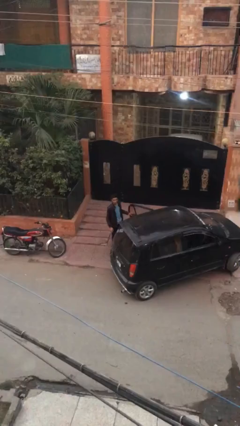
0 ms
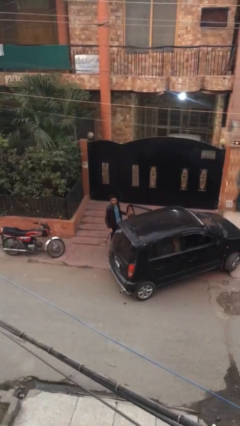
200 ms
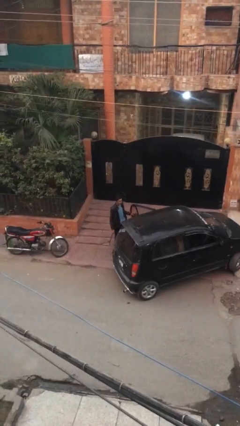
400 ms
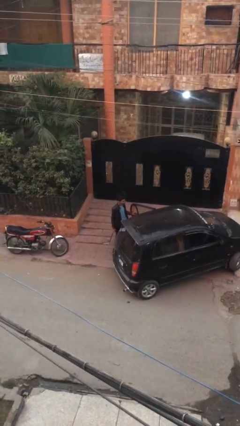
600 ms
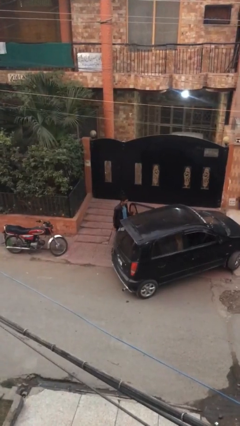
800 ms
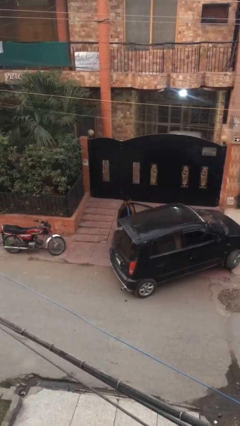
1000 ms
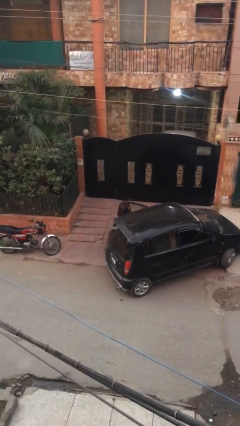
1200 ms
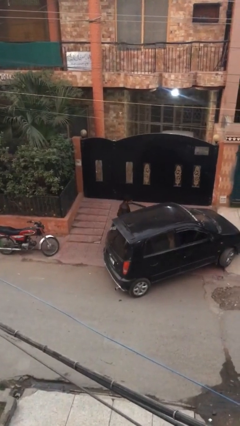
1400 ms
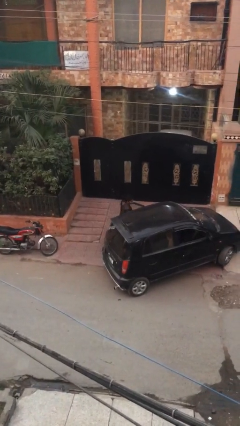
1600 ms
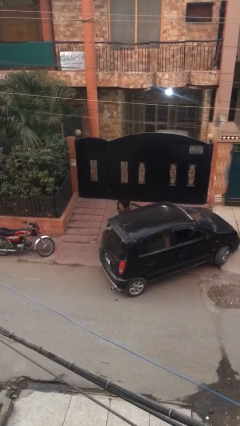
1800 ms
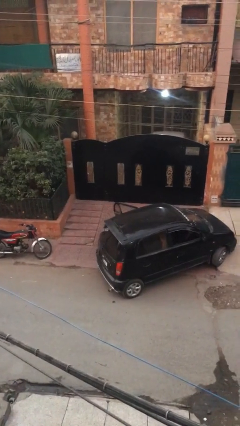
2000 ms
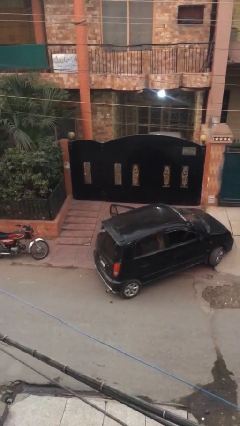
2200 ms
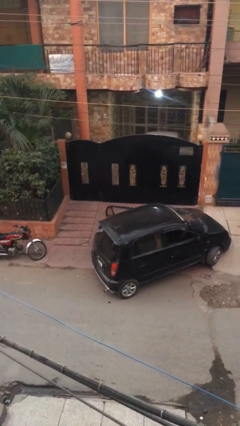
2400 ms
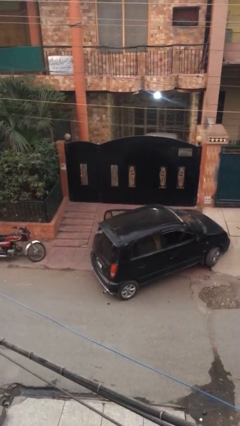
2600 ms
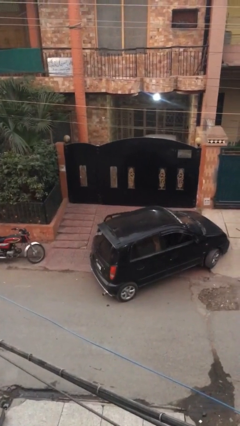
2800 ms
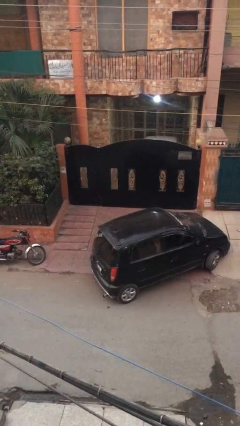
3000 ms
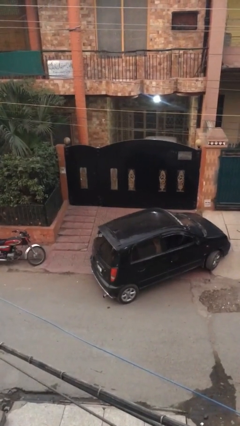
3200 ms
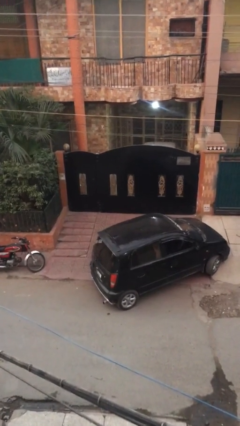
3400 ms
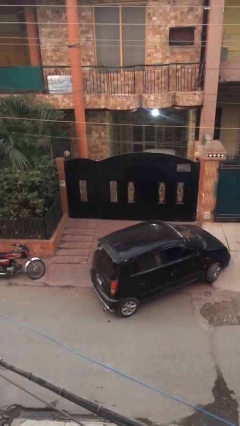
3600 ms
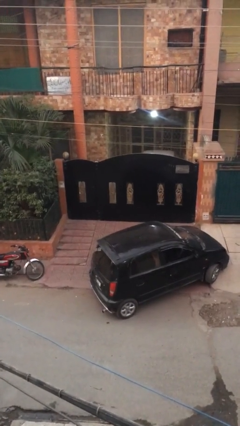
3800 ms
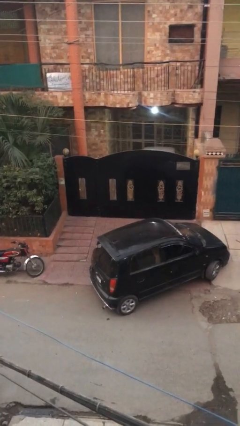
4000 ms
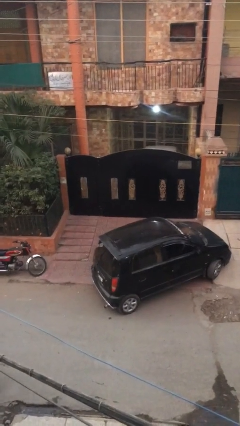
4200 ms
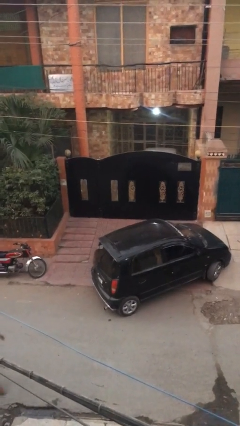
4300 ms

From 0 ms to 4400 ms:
person enters car

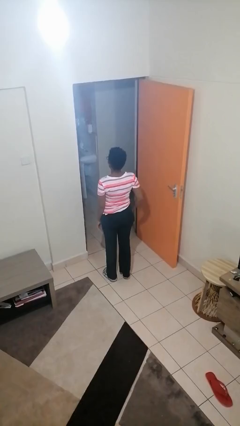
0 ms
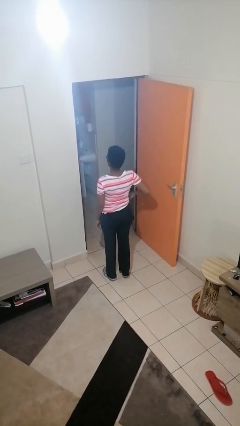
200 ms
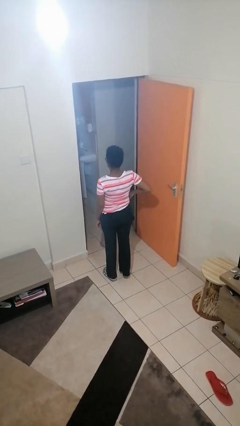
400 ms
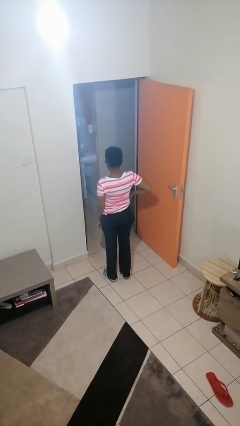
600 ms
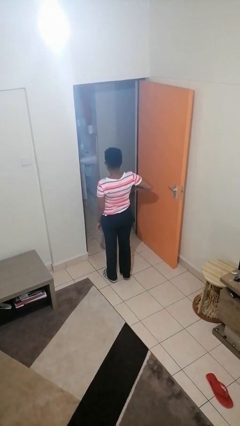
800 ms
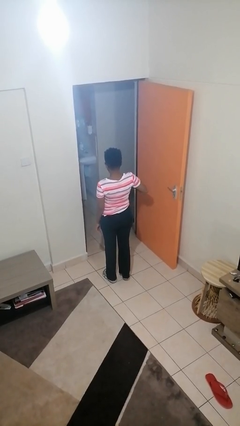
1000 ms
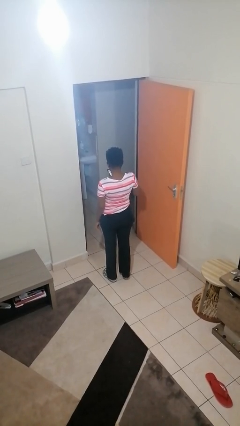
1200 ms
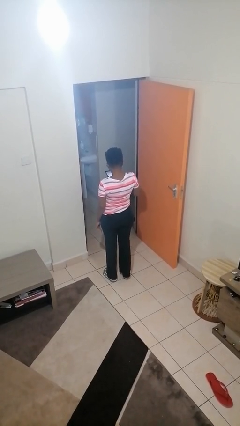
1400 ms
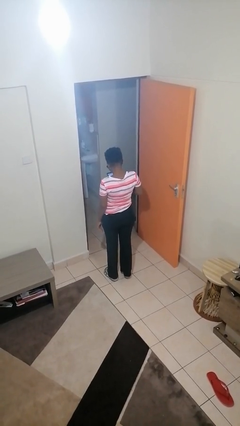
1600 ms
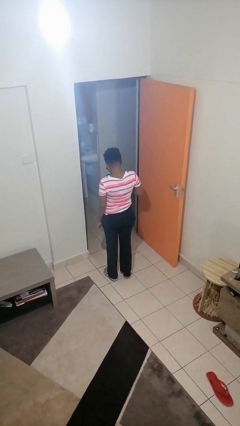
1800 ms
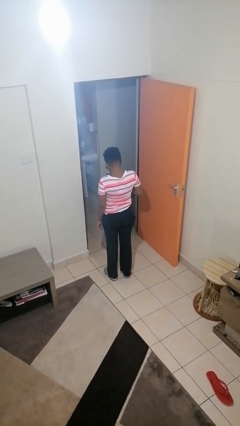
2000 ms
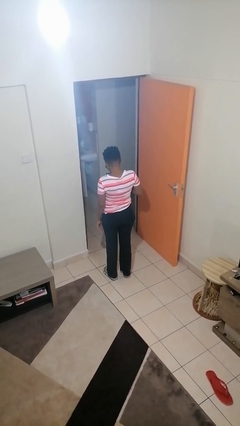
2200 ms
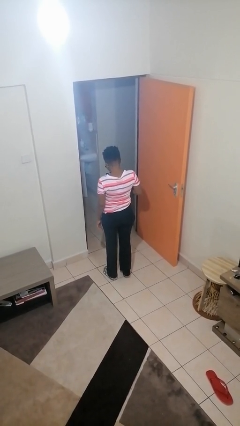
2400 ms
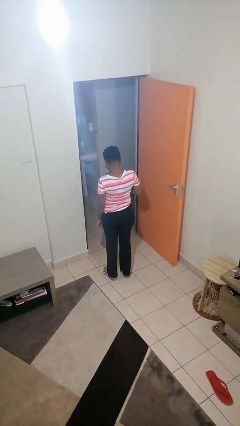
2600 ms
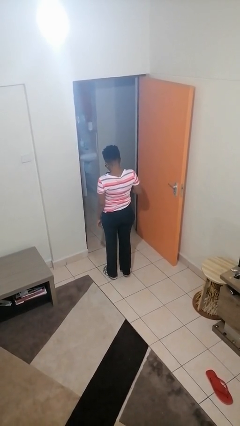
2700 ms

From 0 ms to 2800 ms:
person takes phone from pocket

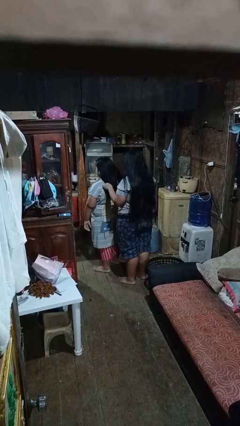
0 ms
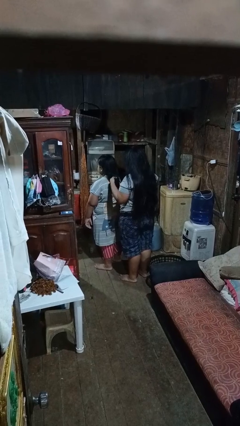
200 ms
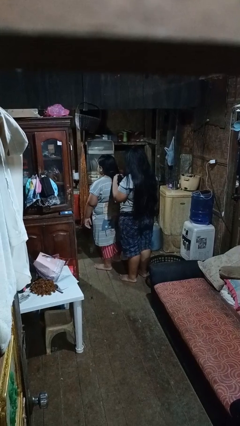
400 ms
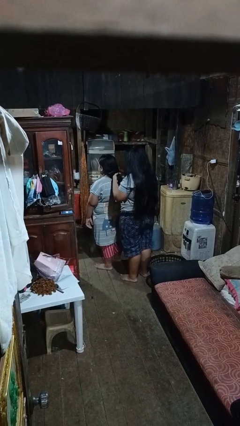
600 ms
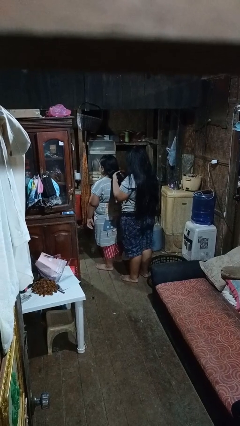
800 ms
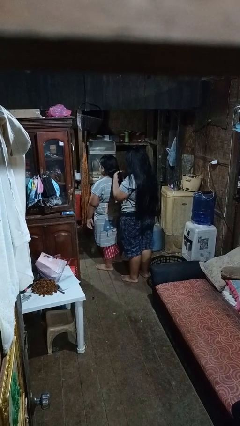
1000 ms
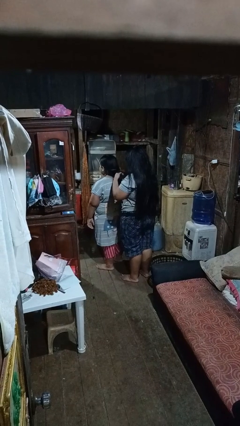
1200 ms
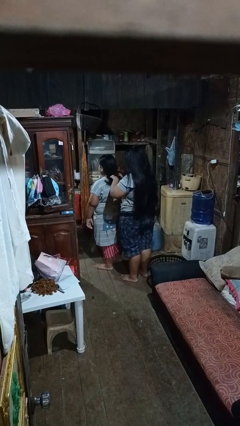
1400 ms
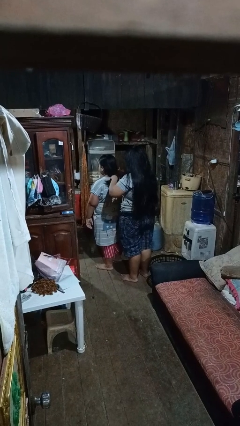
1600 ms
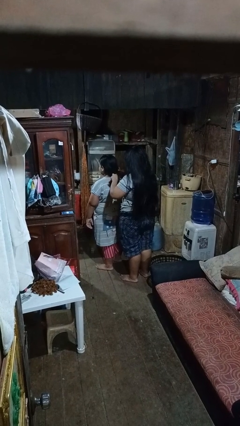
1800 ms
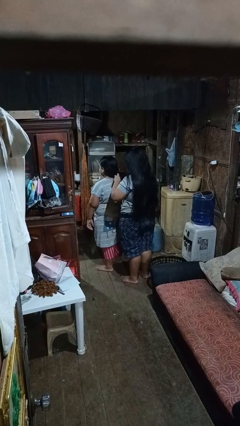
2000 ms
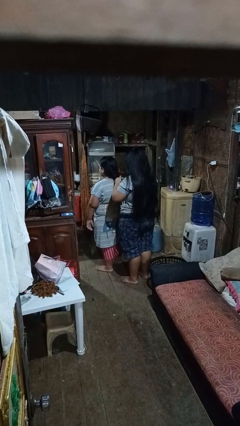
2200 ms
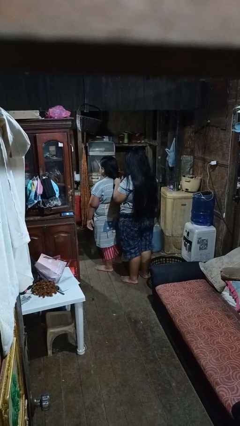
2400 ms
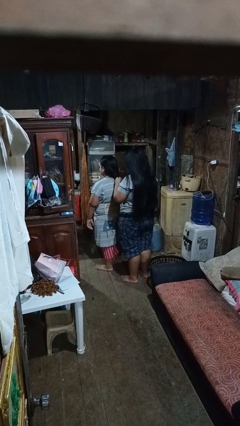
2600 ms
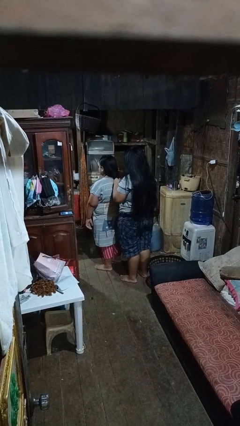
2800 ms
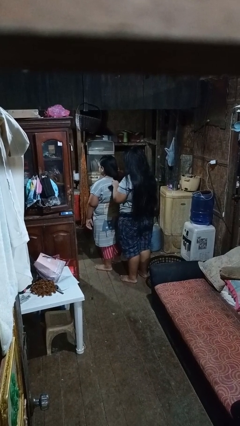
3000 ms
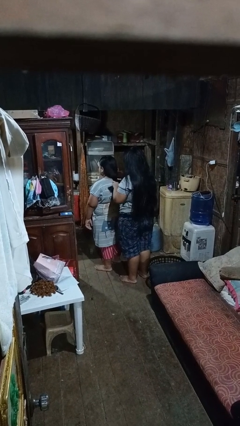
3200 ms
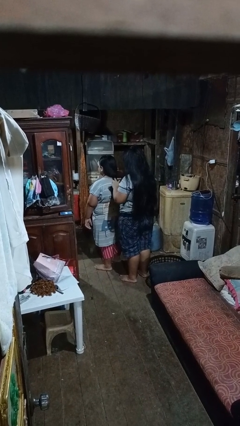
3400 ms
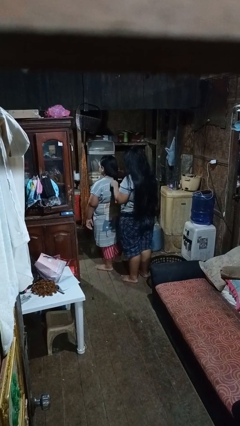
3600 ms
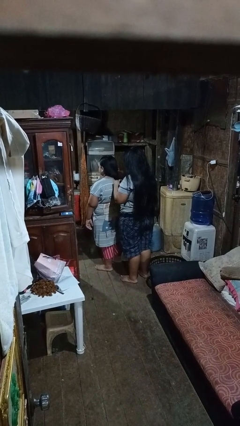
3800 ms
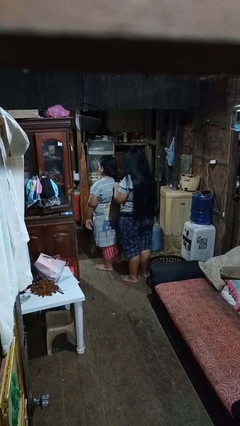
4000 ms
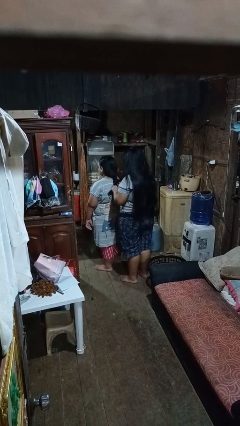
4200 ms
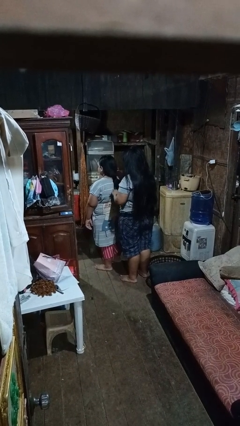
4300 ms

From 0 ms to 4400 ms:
person braids hair of person

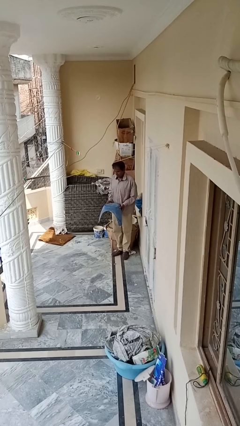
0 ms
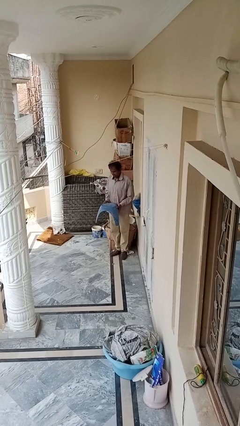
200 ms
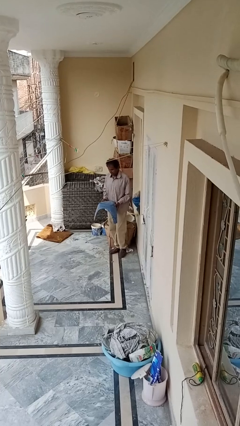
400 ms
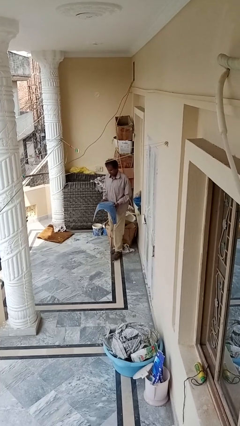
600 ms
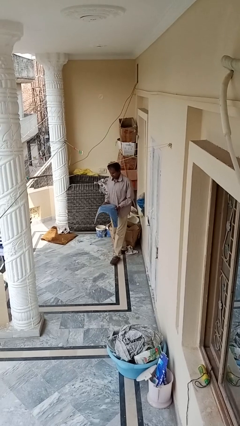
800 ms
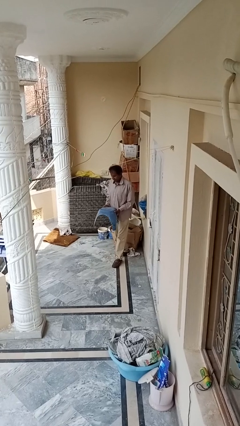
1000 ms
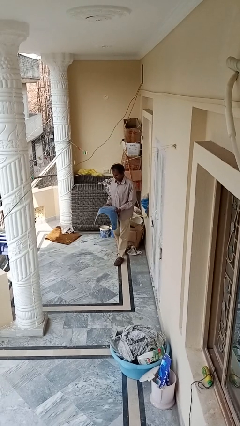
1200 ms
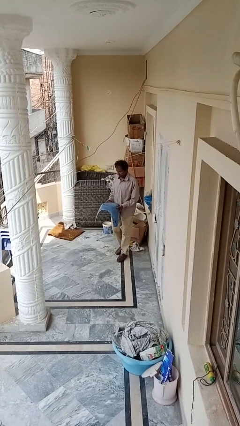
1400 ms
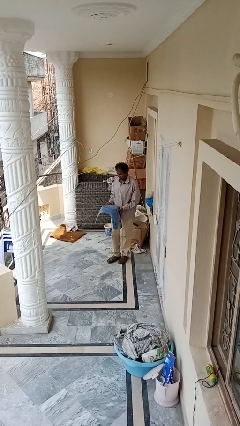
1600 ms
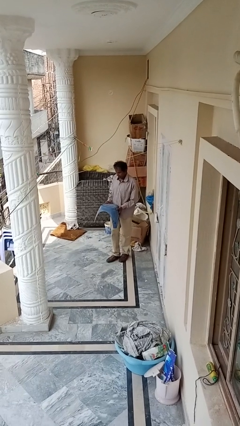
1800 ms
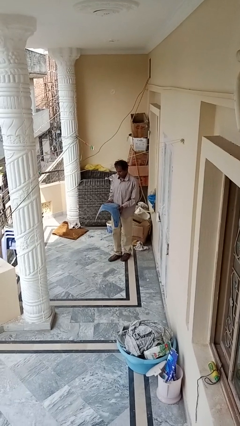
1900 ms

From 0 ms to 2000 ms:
person carries furniture

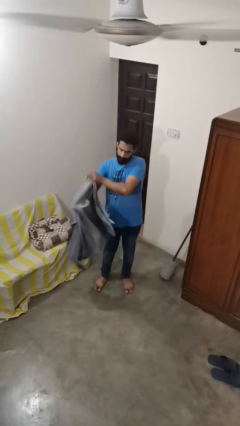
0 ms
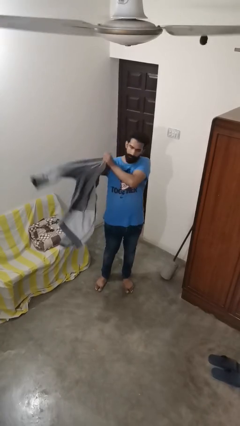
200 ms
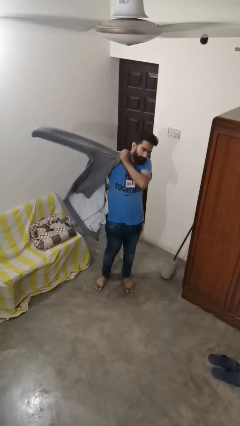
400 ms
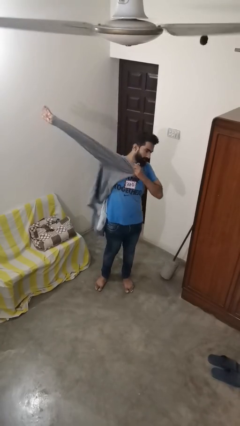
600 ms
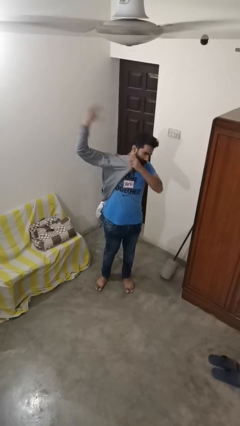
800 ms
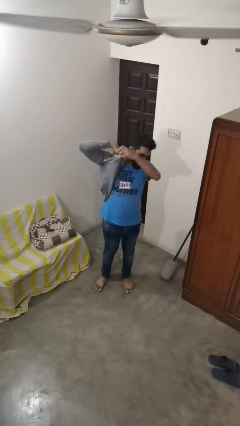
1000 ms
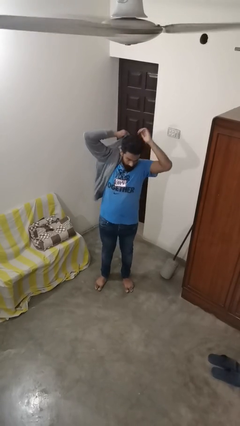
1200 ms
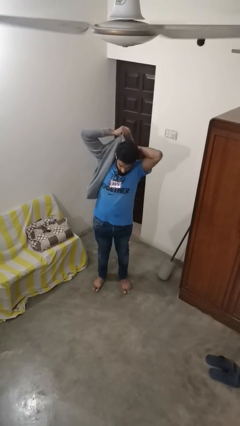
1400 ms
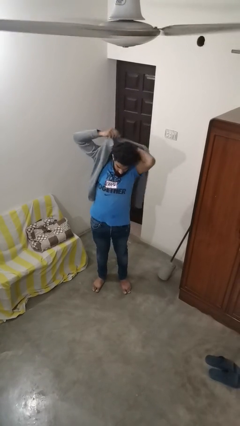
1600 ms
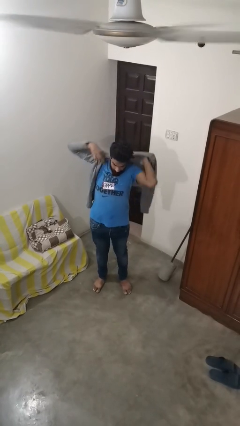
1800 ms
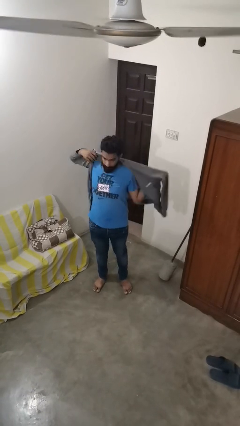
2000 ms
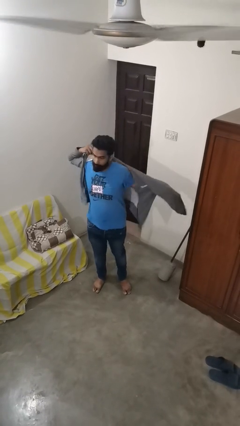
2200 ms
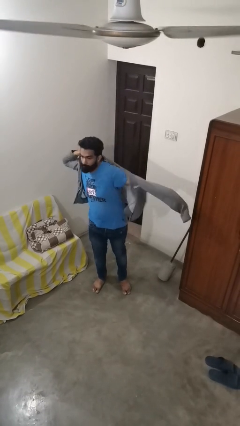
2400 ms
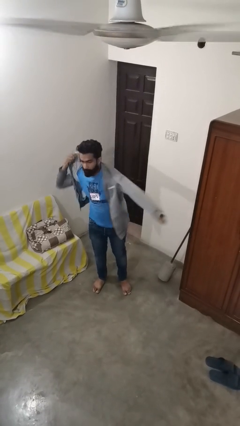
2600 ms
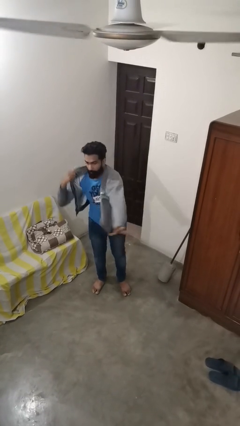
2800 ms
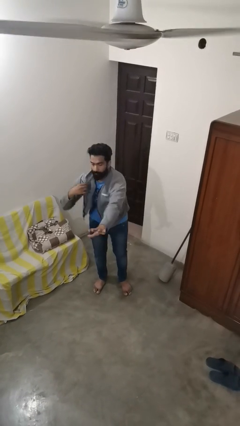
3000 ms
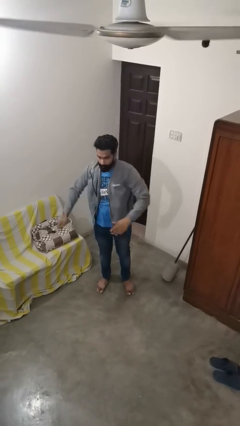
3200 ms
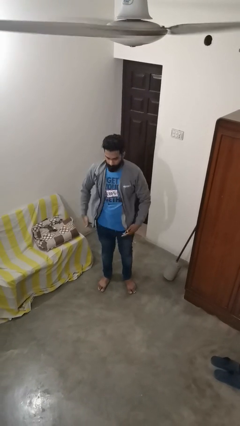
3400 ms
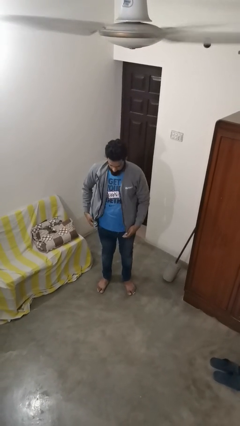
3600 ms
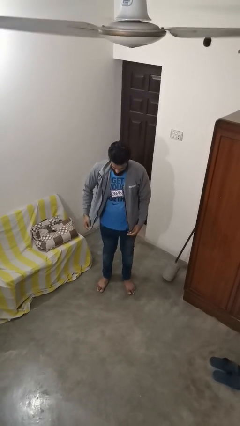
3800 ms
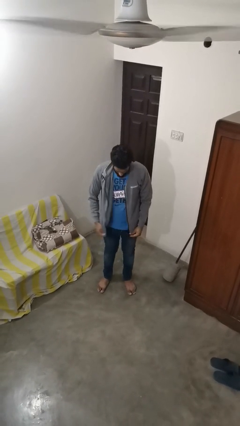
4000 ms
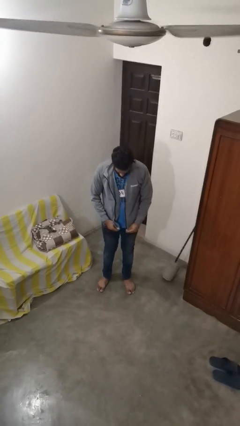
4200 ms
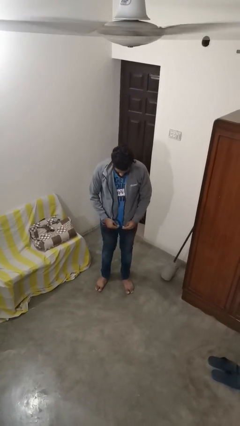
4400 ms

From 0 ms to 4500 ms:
person puts on jacket
